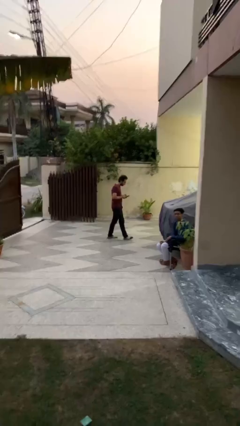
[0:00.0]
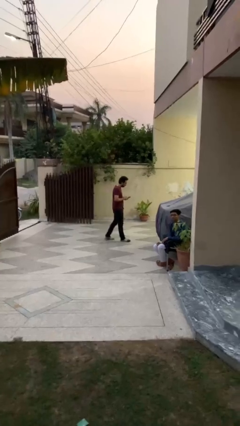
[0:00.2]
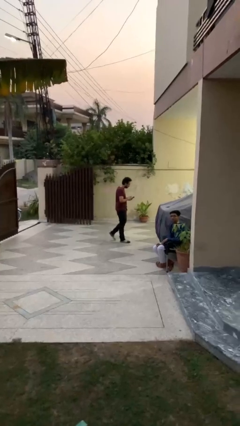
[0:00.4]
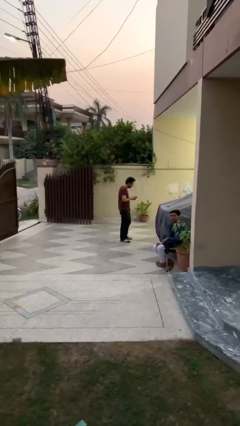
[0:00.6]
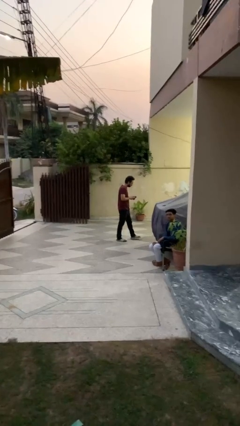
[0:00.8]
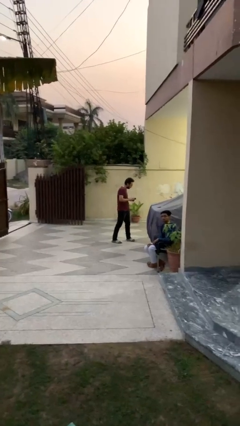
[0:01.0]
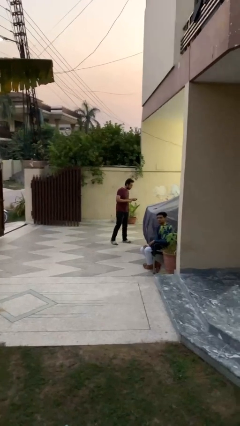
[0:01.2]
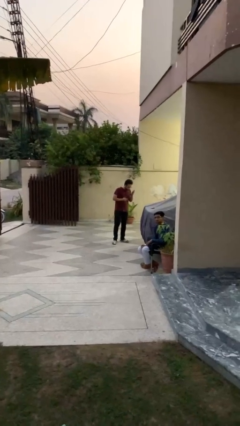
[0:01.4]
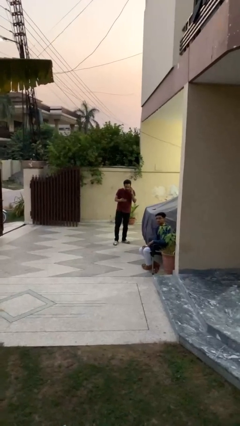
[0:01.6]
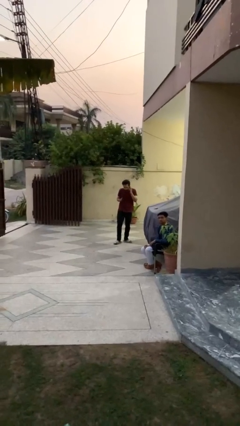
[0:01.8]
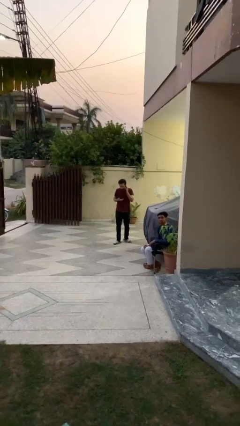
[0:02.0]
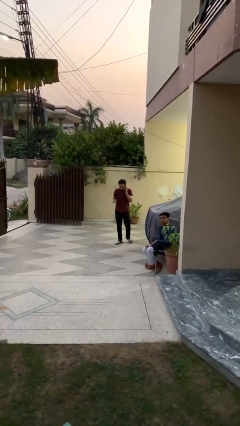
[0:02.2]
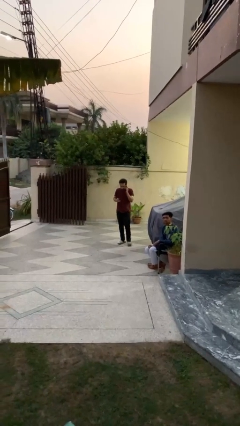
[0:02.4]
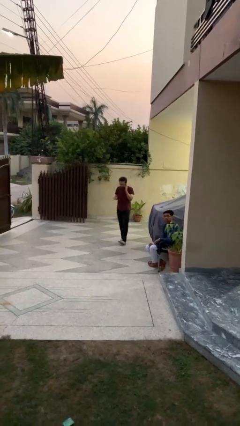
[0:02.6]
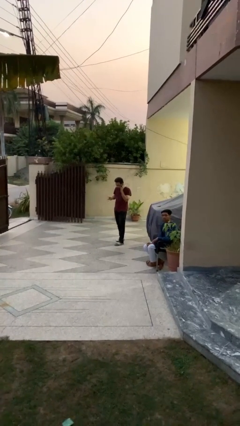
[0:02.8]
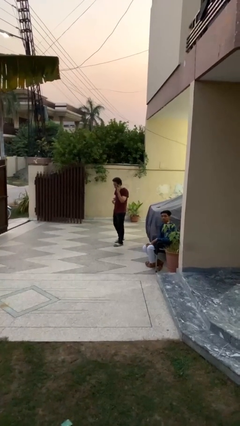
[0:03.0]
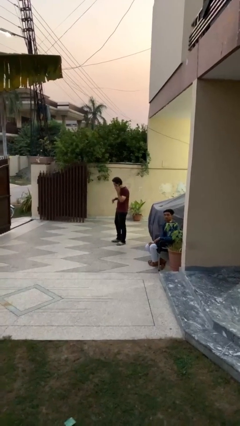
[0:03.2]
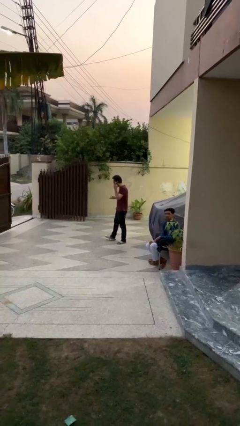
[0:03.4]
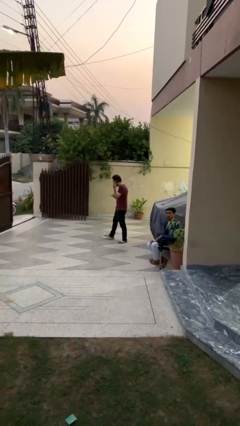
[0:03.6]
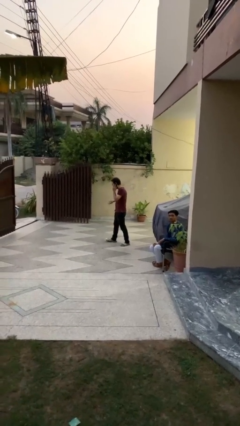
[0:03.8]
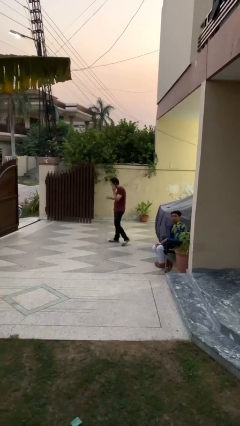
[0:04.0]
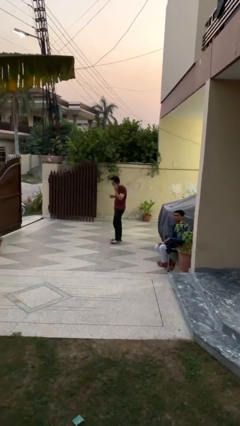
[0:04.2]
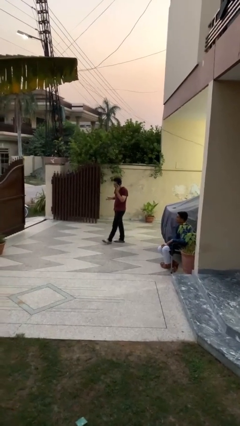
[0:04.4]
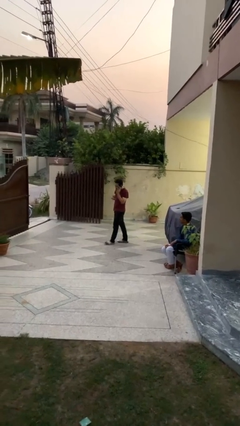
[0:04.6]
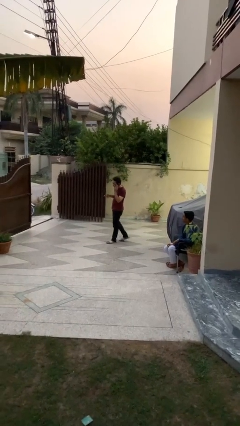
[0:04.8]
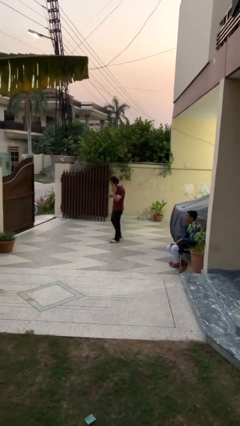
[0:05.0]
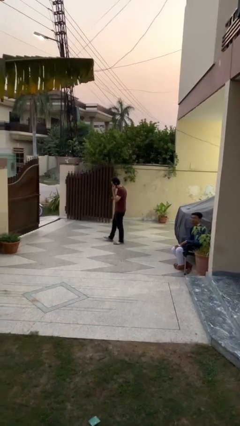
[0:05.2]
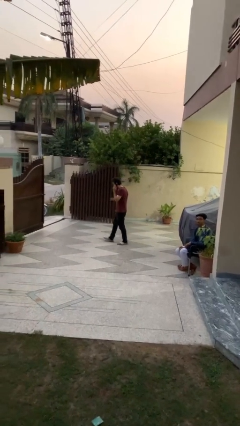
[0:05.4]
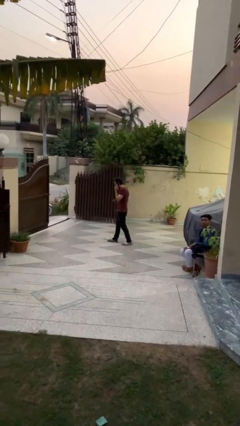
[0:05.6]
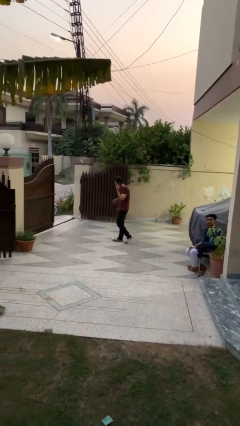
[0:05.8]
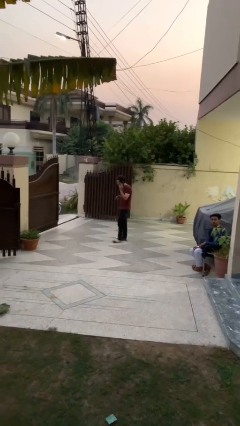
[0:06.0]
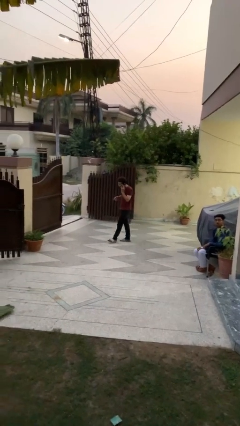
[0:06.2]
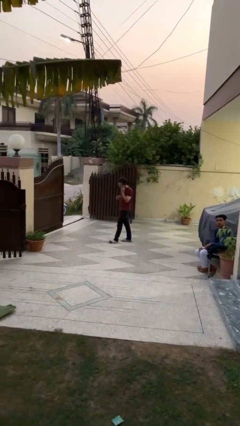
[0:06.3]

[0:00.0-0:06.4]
person talks on phone

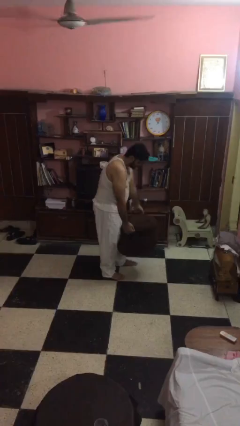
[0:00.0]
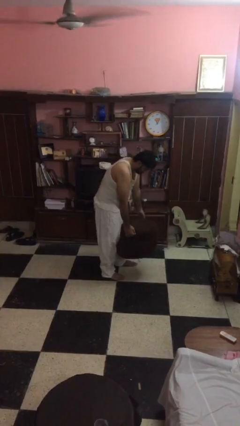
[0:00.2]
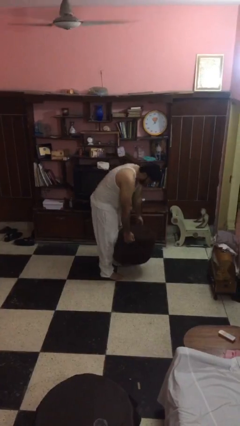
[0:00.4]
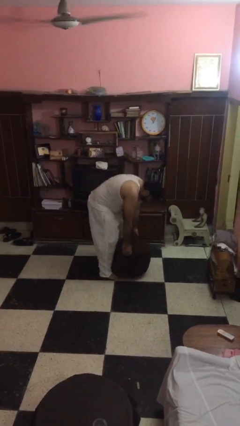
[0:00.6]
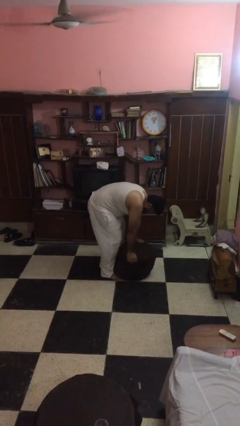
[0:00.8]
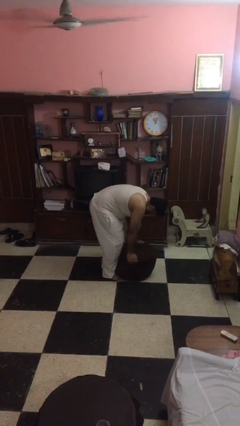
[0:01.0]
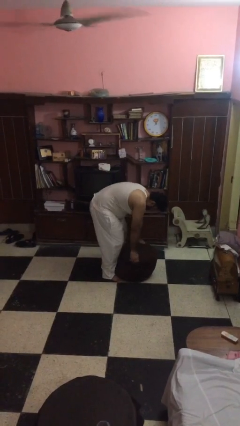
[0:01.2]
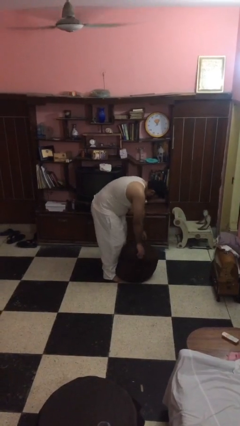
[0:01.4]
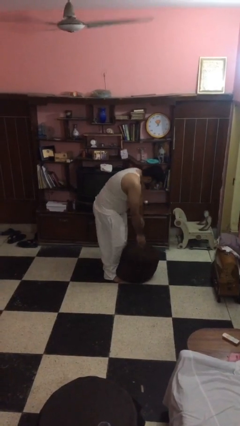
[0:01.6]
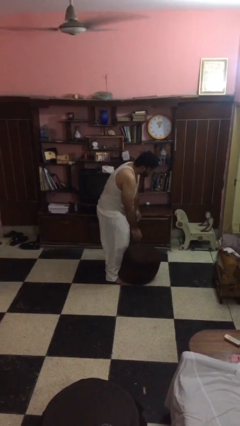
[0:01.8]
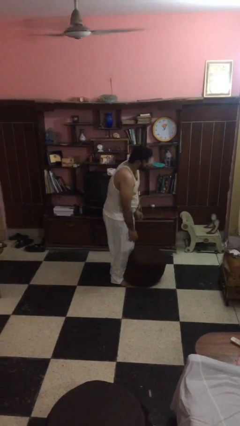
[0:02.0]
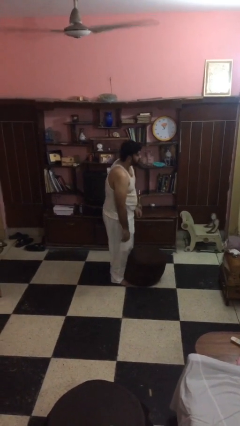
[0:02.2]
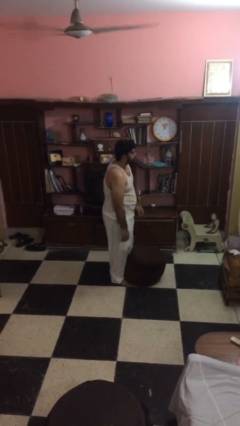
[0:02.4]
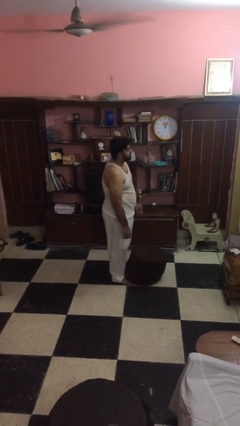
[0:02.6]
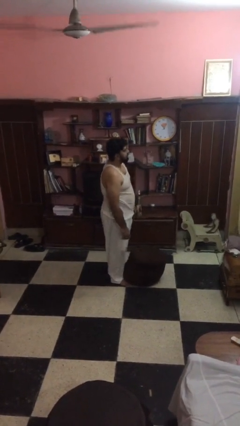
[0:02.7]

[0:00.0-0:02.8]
person puts down object on floor

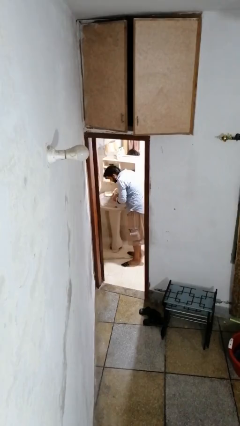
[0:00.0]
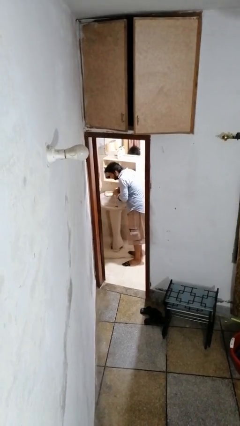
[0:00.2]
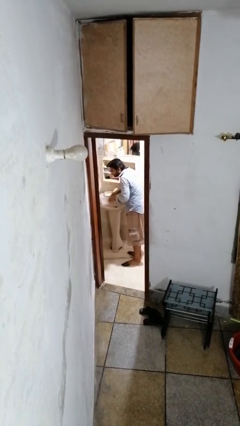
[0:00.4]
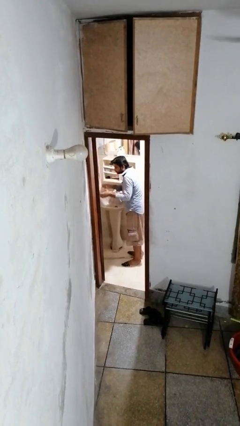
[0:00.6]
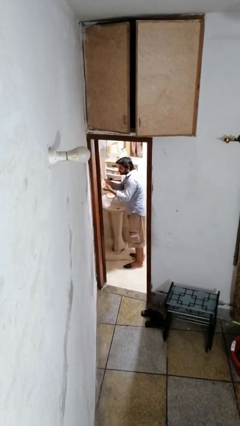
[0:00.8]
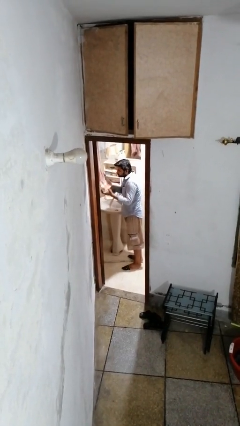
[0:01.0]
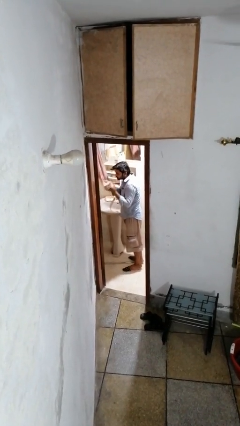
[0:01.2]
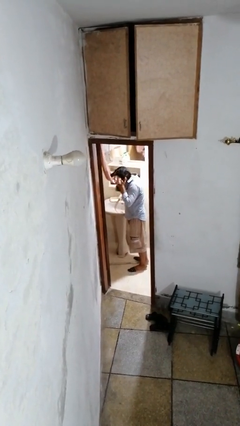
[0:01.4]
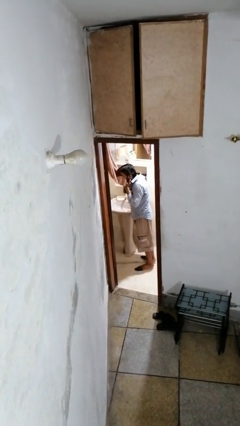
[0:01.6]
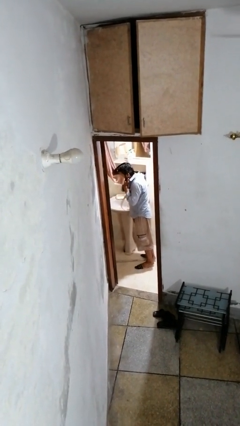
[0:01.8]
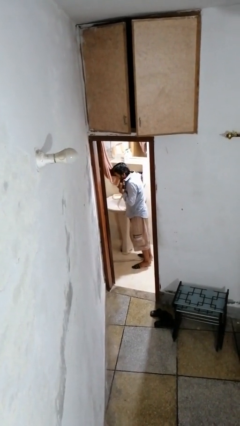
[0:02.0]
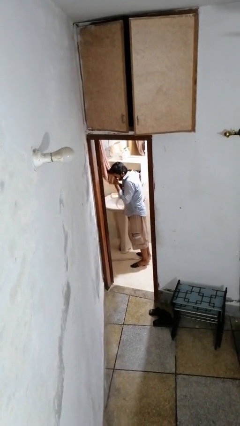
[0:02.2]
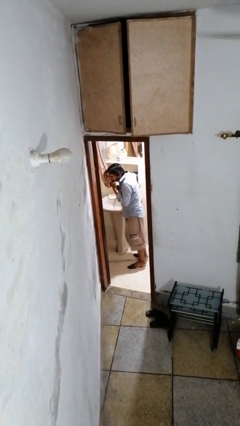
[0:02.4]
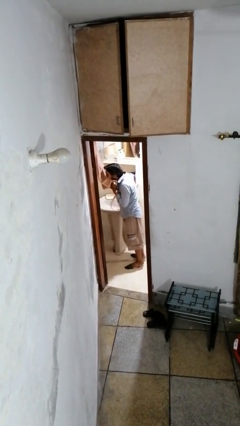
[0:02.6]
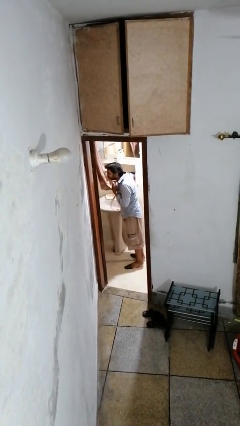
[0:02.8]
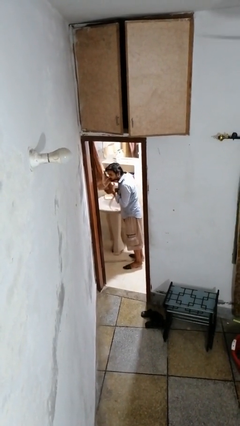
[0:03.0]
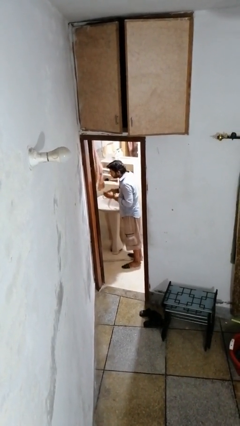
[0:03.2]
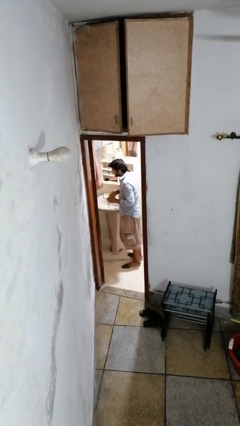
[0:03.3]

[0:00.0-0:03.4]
person dries face with towel

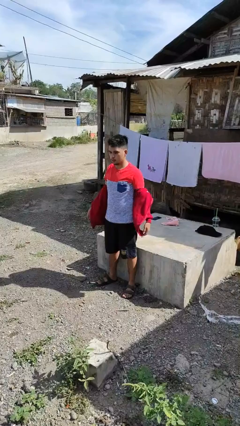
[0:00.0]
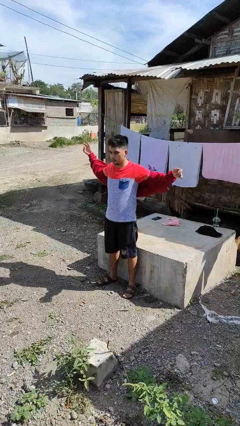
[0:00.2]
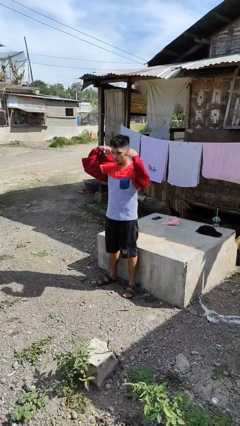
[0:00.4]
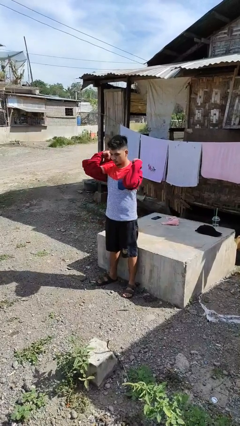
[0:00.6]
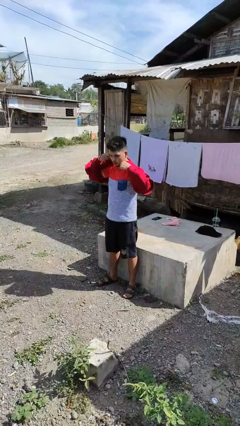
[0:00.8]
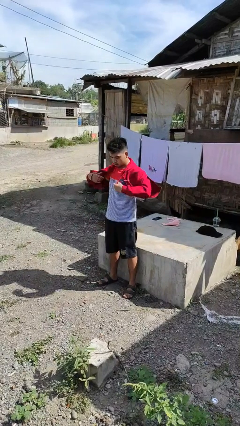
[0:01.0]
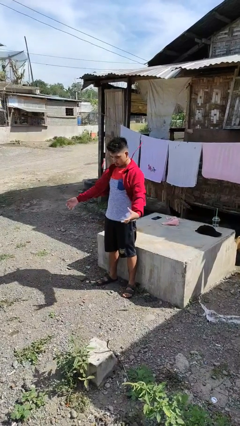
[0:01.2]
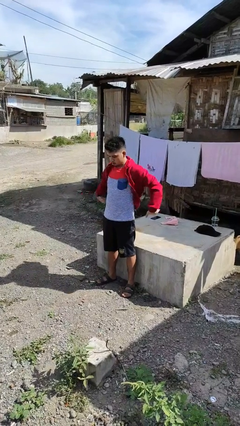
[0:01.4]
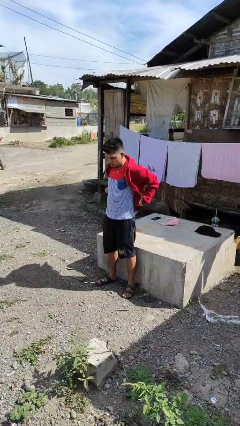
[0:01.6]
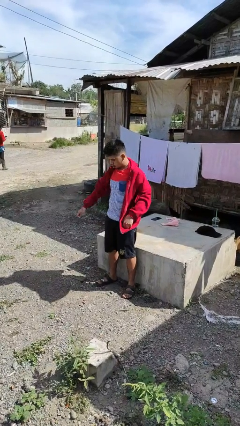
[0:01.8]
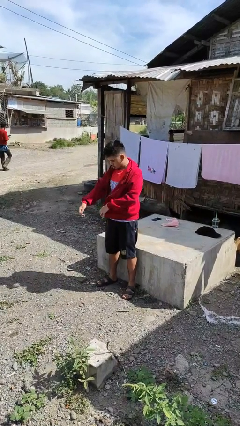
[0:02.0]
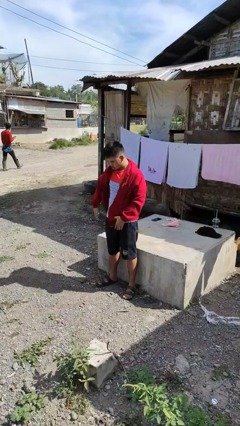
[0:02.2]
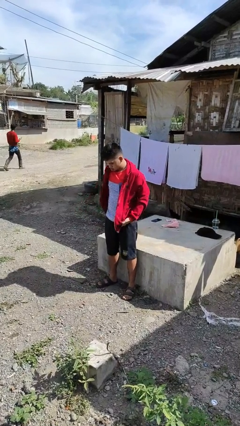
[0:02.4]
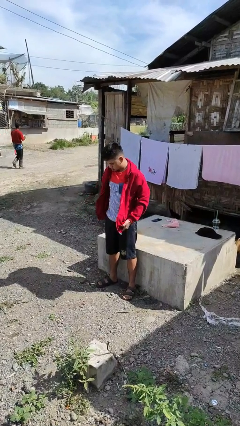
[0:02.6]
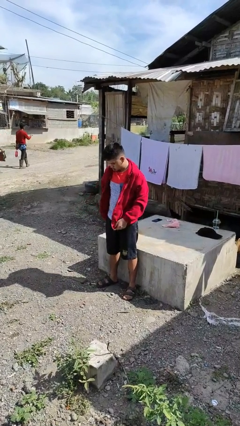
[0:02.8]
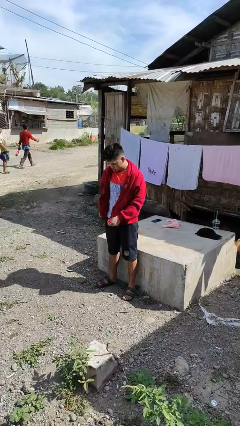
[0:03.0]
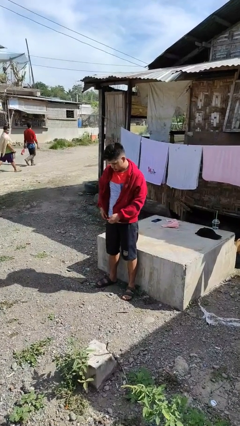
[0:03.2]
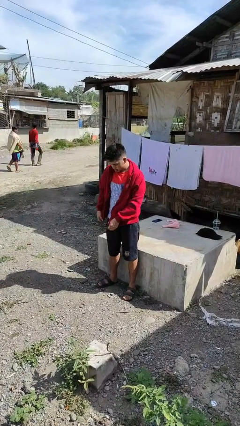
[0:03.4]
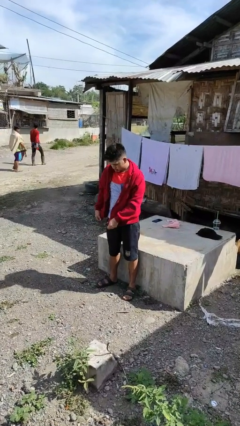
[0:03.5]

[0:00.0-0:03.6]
person puts on jacket

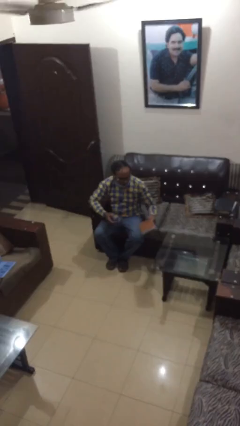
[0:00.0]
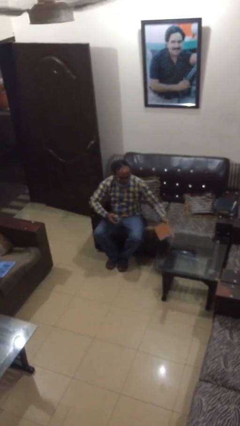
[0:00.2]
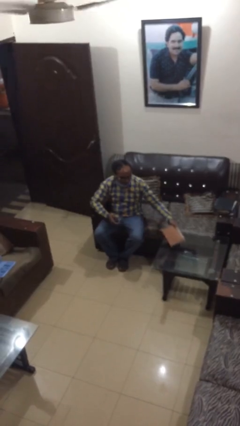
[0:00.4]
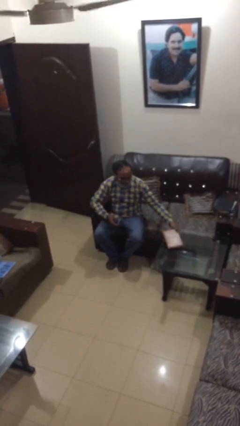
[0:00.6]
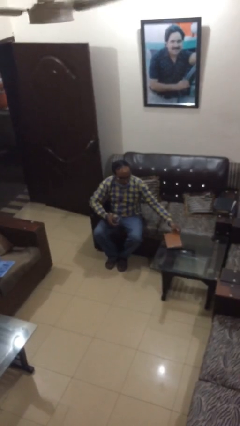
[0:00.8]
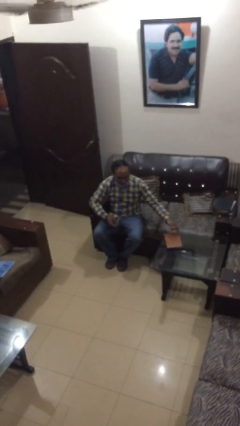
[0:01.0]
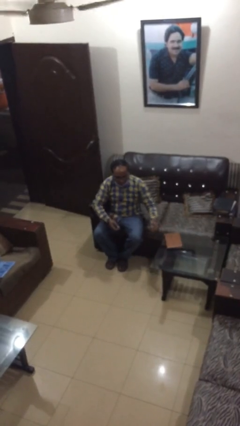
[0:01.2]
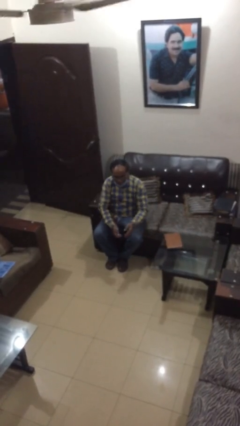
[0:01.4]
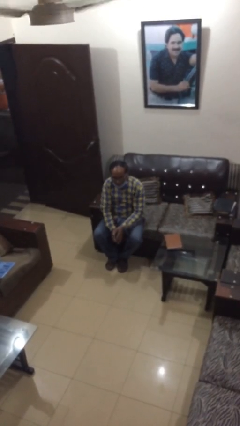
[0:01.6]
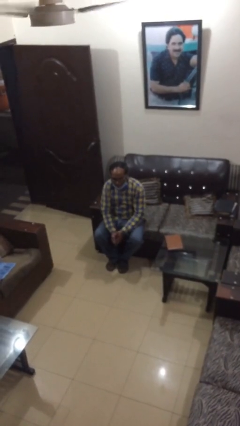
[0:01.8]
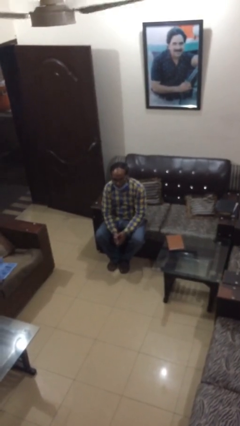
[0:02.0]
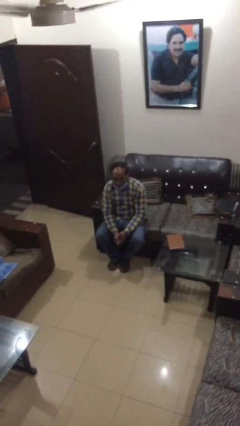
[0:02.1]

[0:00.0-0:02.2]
person puts down object on table
